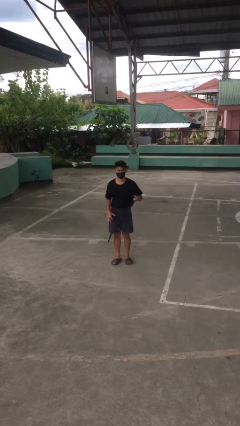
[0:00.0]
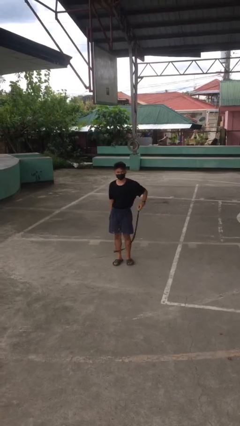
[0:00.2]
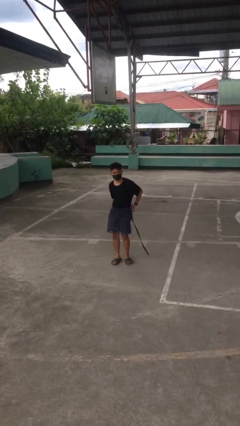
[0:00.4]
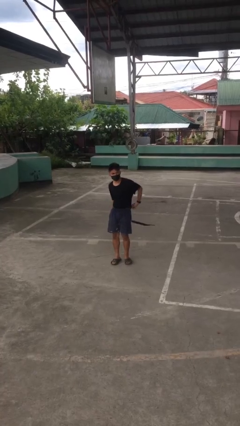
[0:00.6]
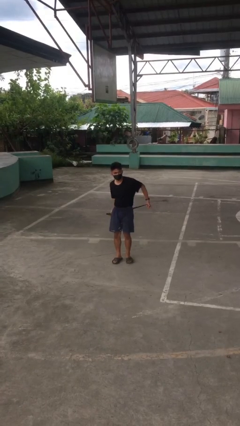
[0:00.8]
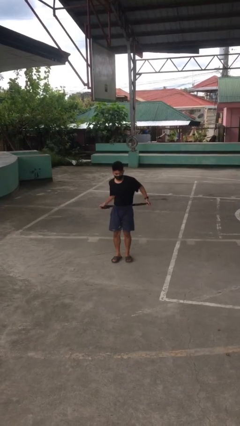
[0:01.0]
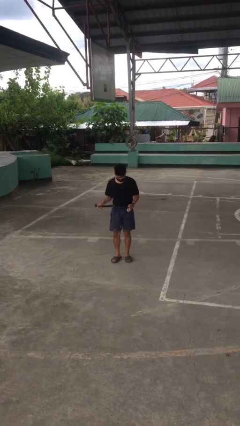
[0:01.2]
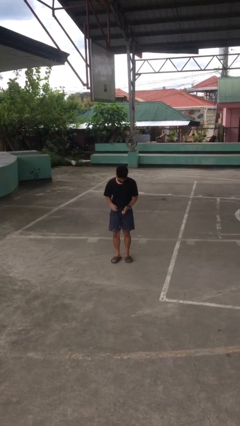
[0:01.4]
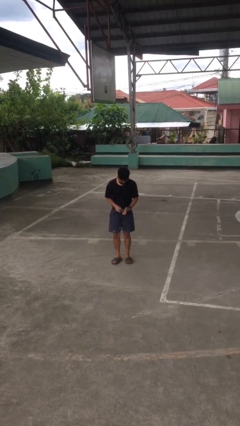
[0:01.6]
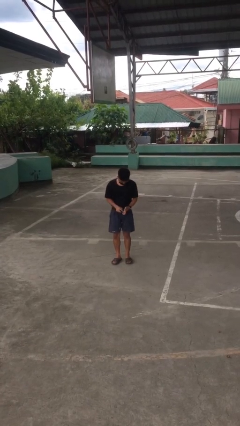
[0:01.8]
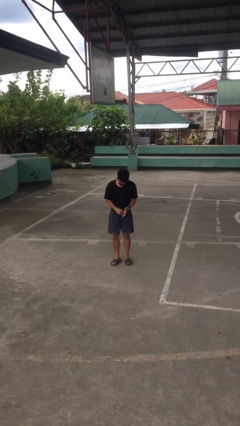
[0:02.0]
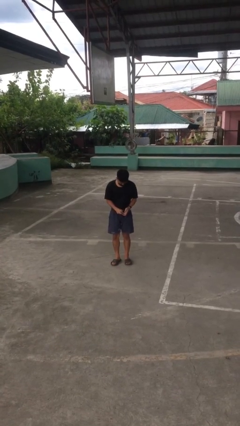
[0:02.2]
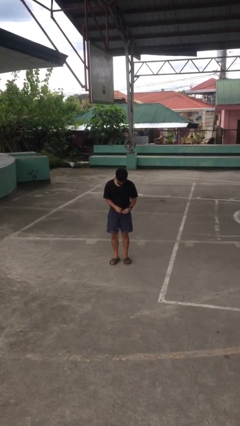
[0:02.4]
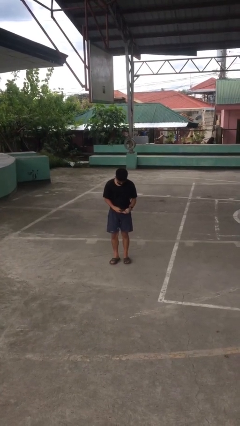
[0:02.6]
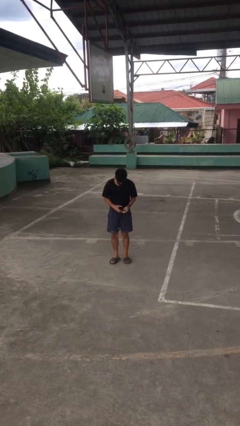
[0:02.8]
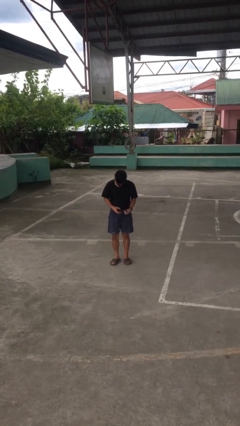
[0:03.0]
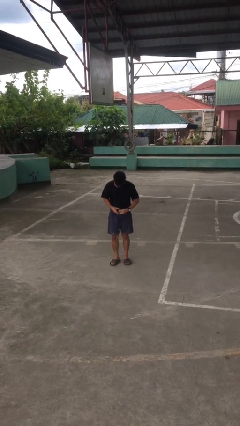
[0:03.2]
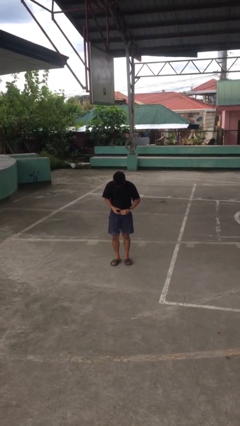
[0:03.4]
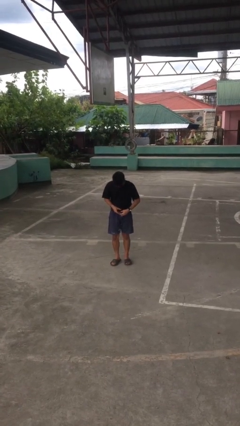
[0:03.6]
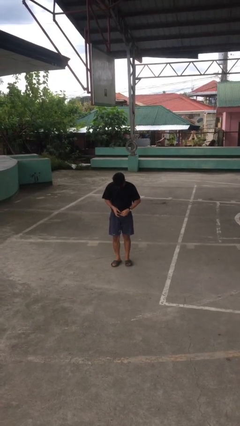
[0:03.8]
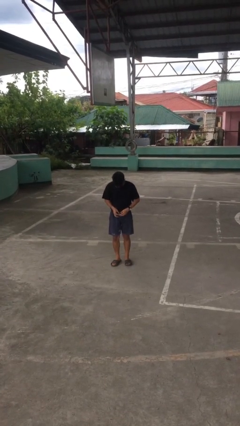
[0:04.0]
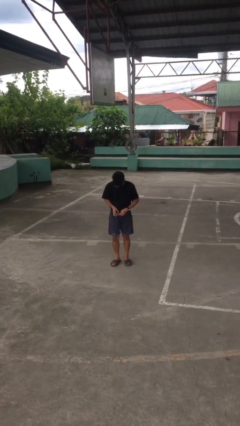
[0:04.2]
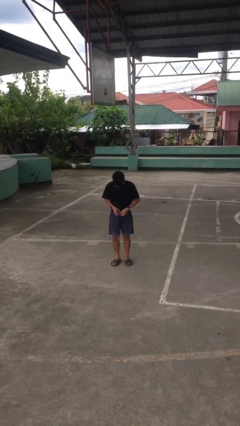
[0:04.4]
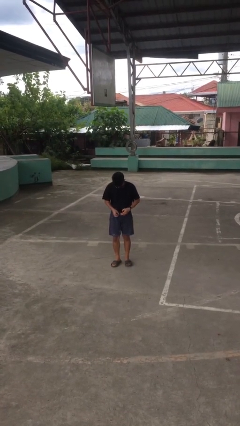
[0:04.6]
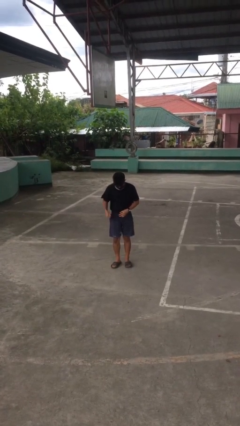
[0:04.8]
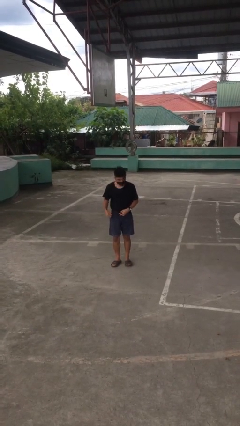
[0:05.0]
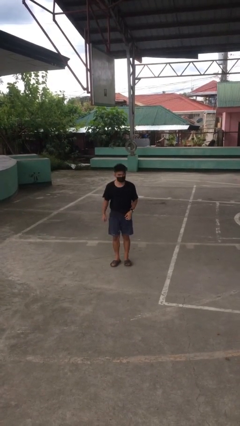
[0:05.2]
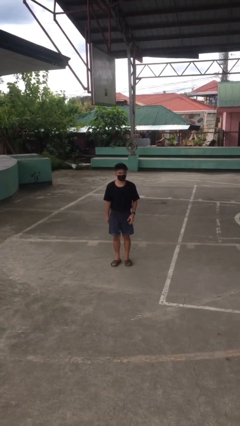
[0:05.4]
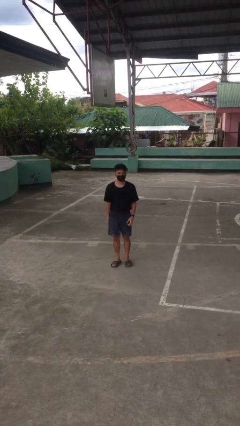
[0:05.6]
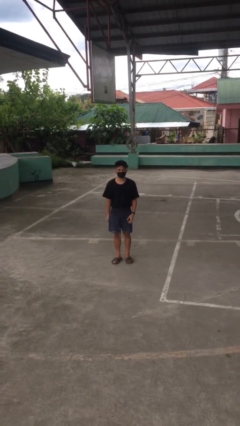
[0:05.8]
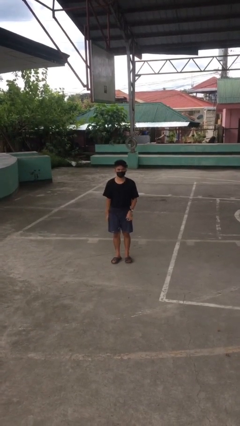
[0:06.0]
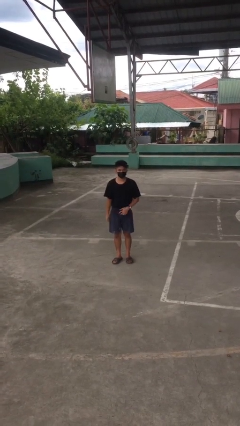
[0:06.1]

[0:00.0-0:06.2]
person puts on belt

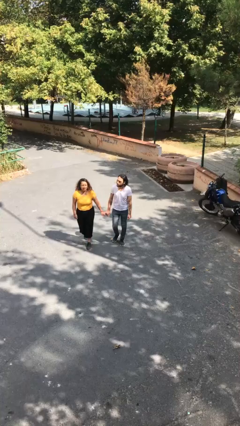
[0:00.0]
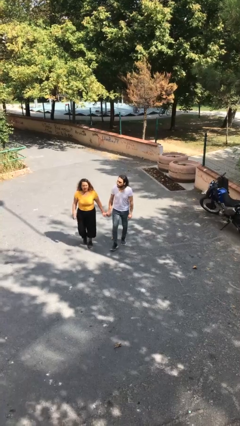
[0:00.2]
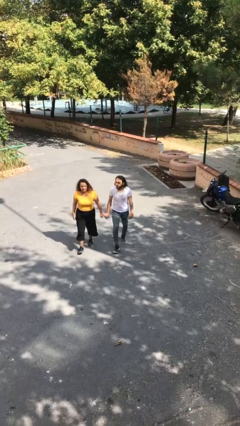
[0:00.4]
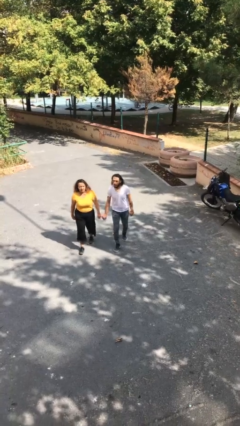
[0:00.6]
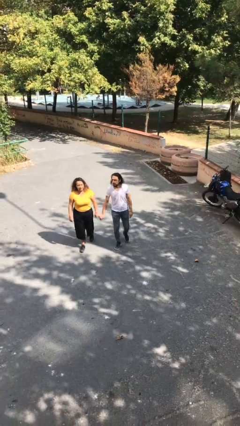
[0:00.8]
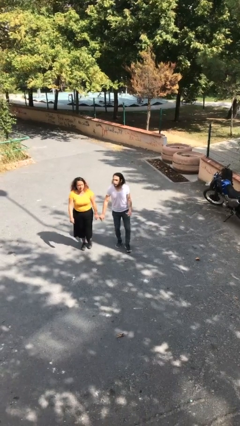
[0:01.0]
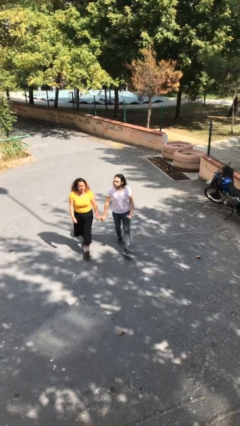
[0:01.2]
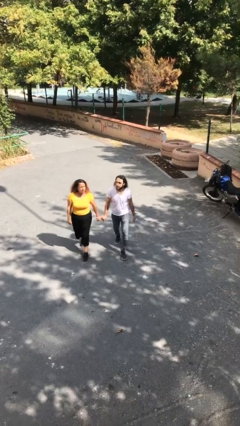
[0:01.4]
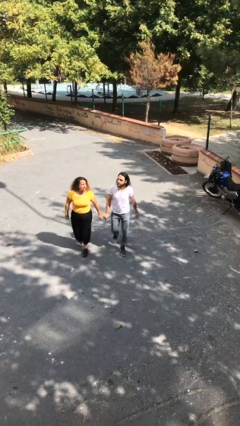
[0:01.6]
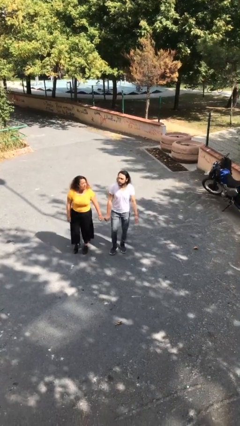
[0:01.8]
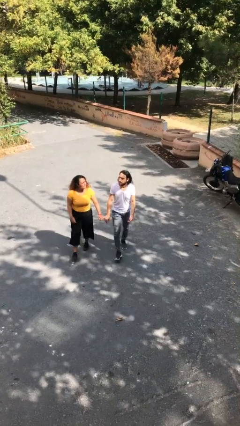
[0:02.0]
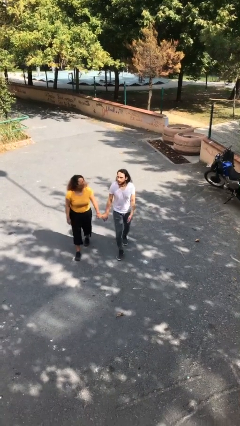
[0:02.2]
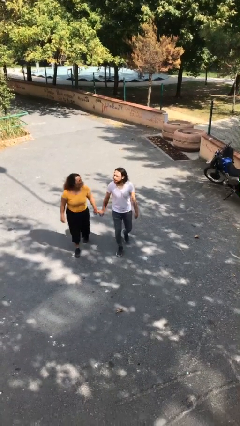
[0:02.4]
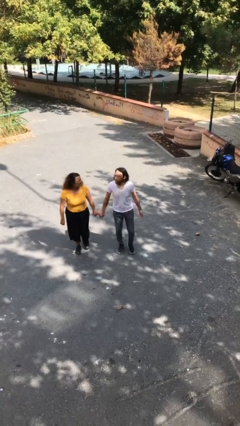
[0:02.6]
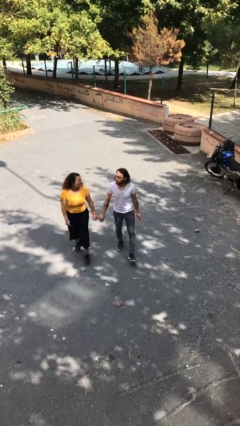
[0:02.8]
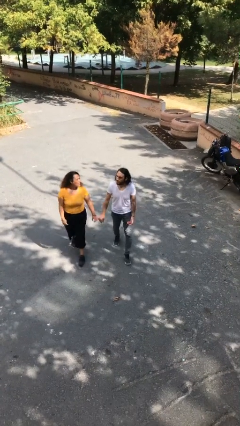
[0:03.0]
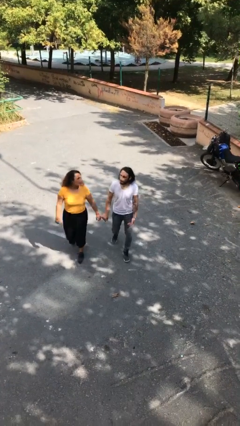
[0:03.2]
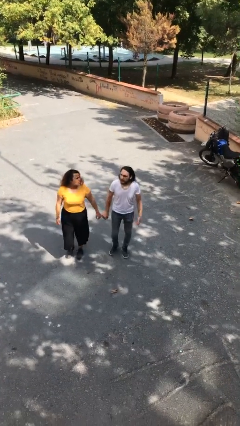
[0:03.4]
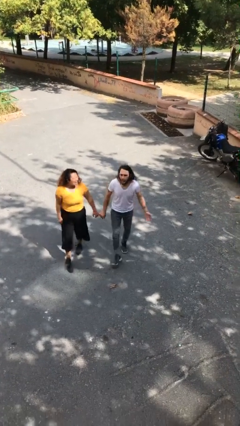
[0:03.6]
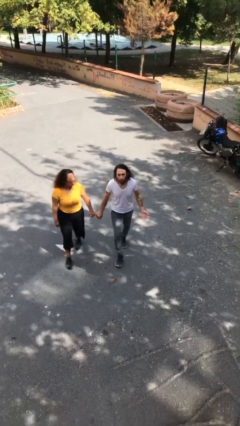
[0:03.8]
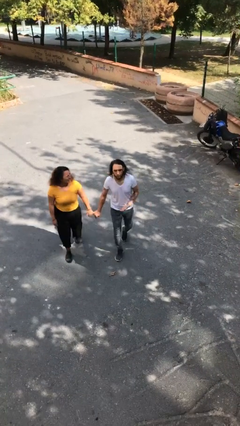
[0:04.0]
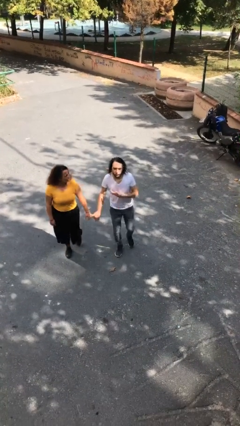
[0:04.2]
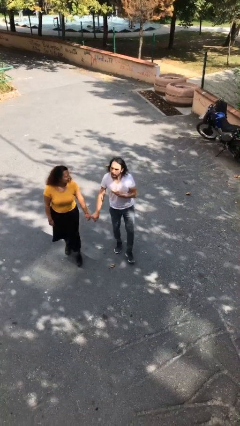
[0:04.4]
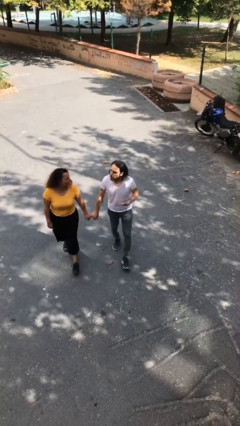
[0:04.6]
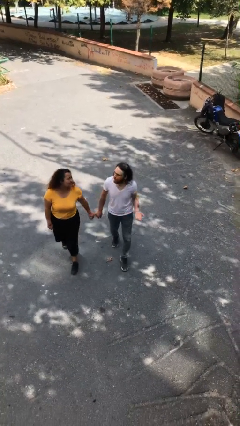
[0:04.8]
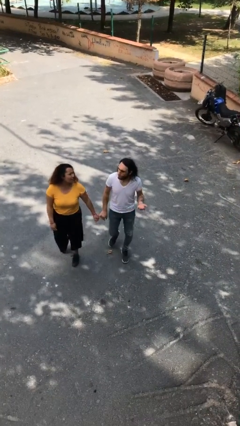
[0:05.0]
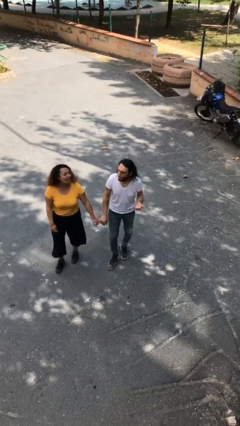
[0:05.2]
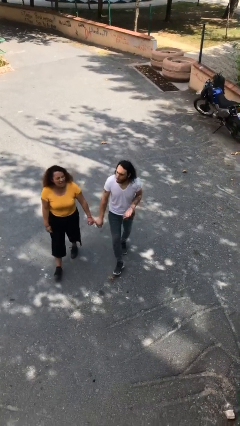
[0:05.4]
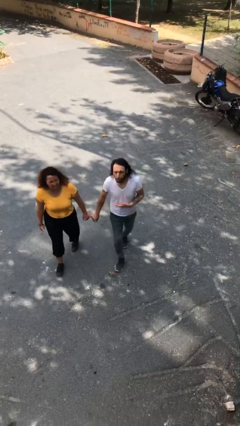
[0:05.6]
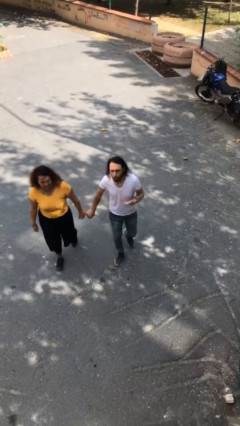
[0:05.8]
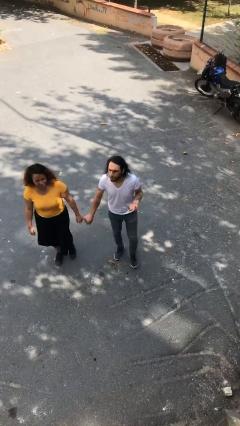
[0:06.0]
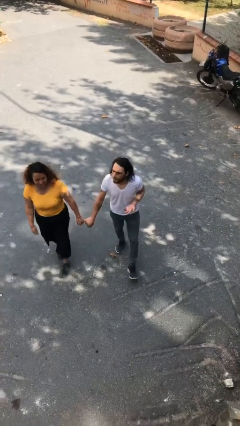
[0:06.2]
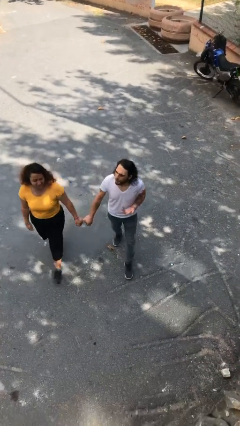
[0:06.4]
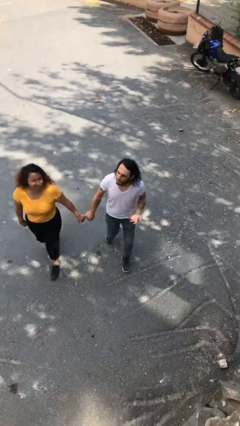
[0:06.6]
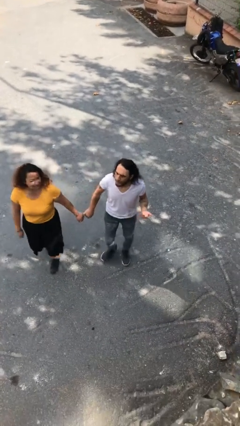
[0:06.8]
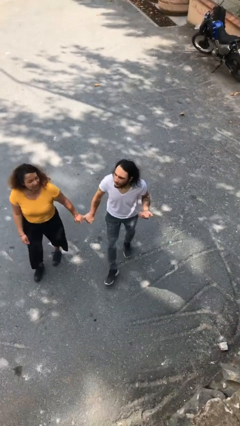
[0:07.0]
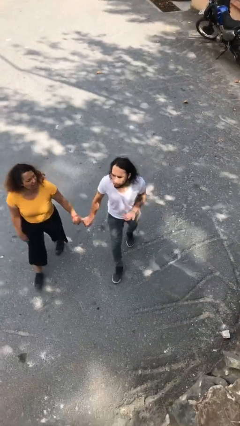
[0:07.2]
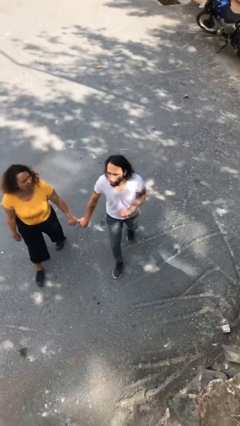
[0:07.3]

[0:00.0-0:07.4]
person holds hand

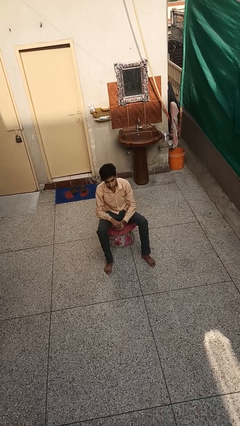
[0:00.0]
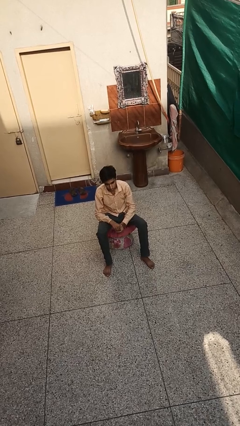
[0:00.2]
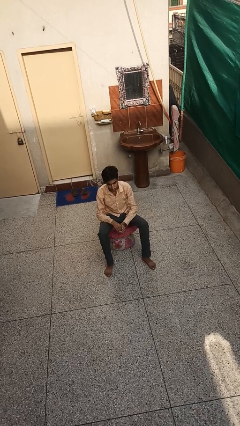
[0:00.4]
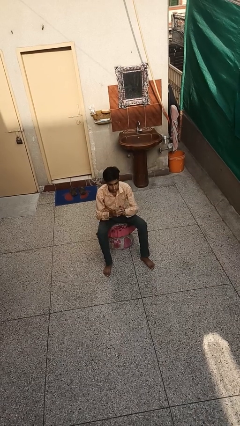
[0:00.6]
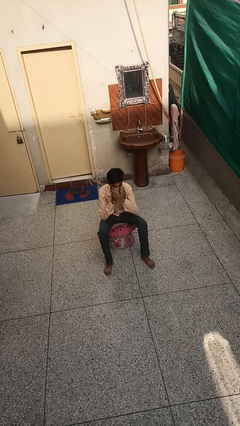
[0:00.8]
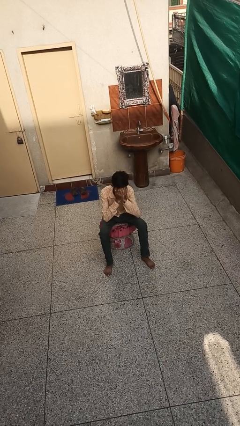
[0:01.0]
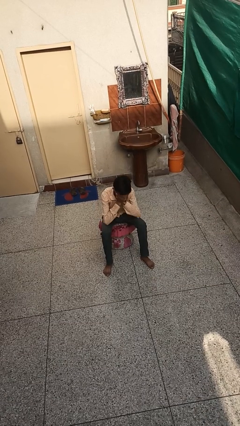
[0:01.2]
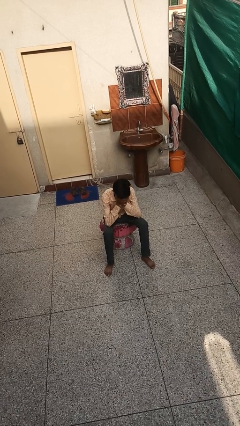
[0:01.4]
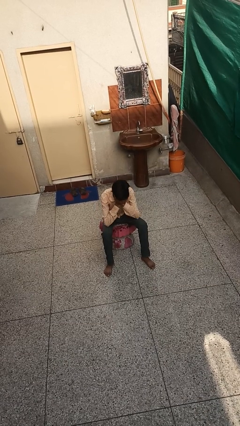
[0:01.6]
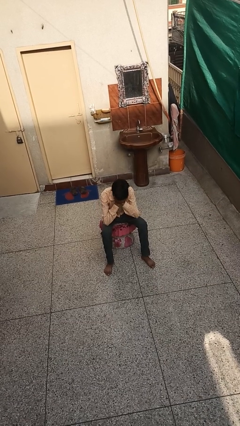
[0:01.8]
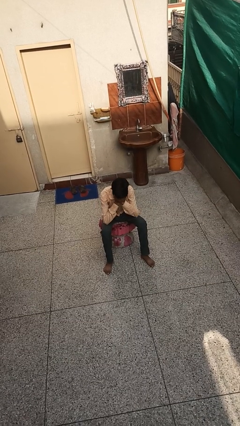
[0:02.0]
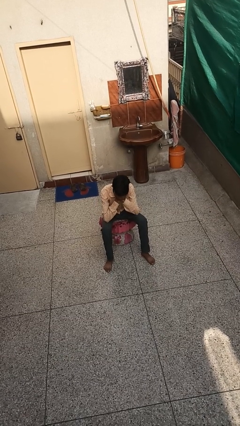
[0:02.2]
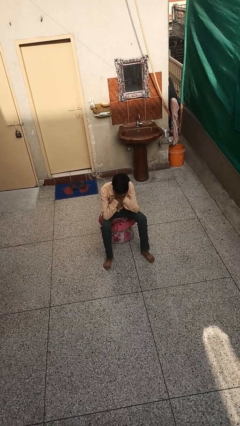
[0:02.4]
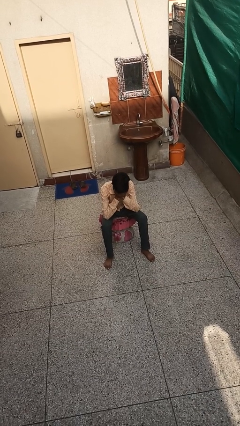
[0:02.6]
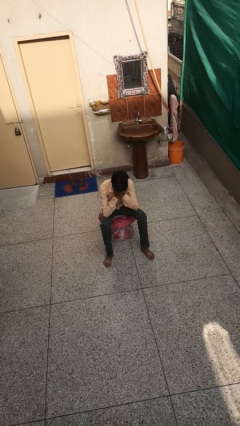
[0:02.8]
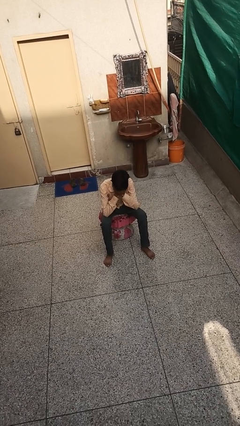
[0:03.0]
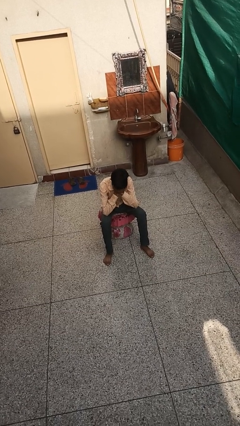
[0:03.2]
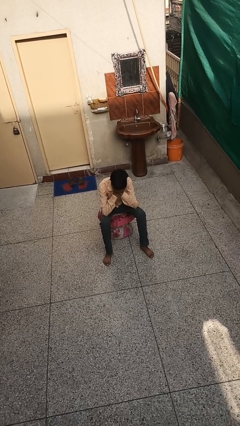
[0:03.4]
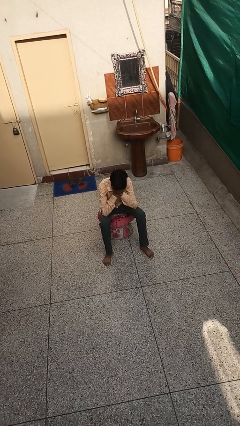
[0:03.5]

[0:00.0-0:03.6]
person covers face with hands

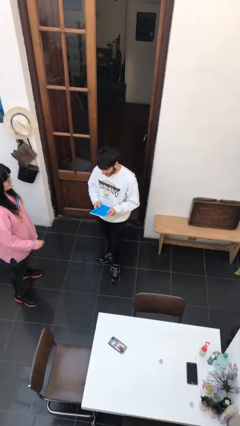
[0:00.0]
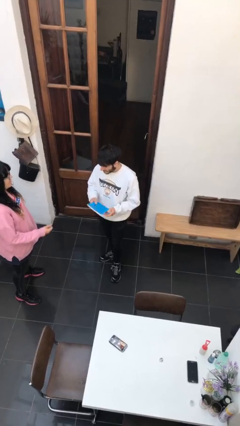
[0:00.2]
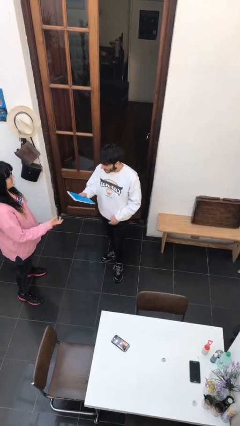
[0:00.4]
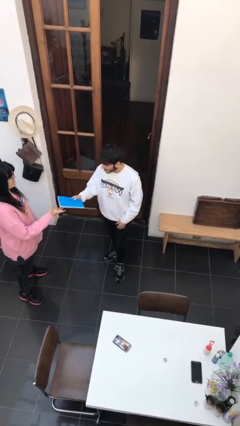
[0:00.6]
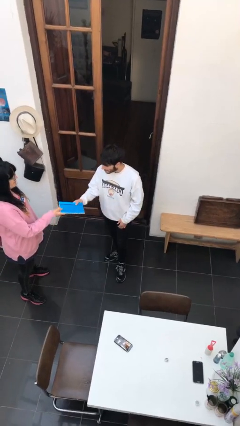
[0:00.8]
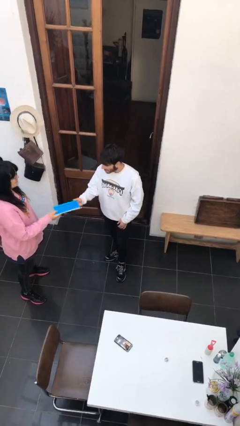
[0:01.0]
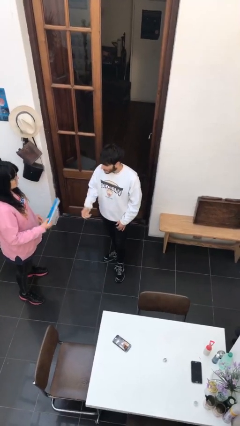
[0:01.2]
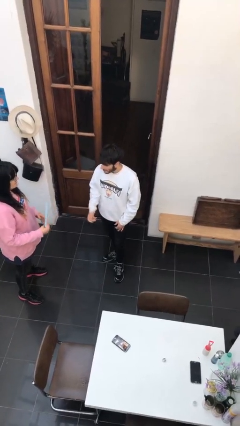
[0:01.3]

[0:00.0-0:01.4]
person transfers object to person
